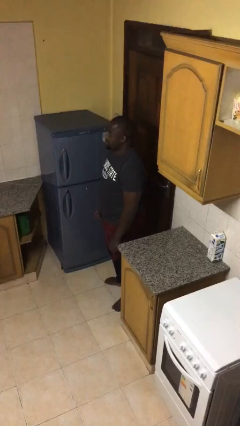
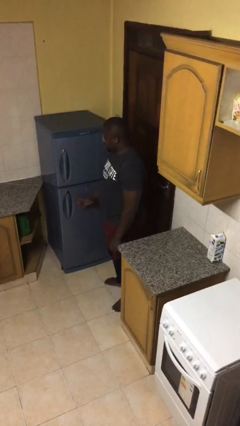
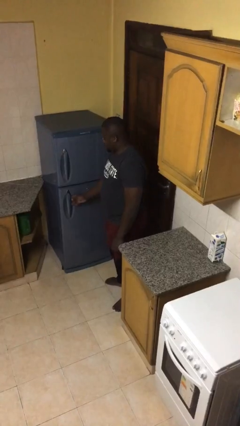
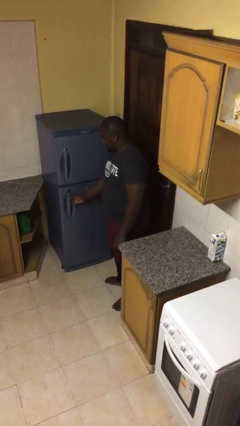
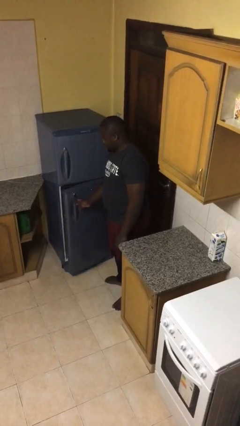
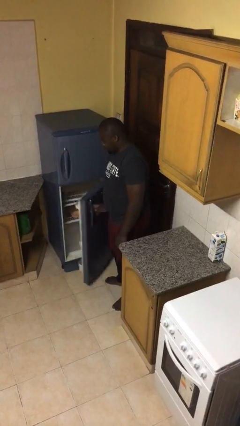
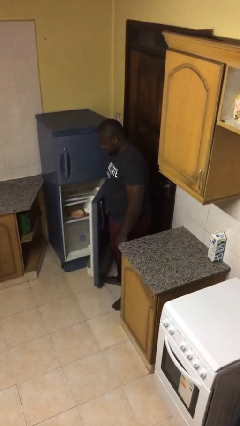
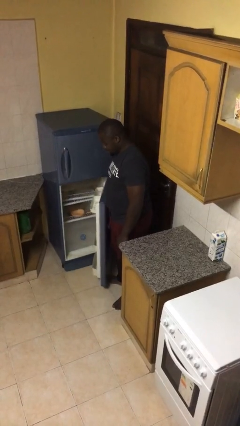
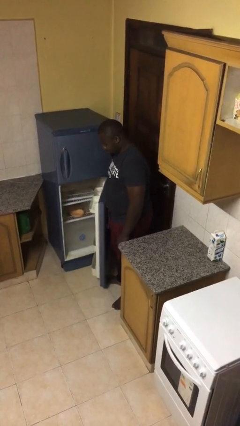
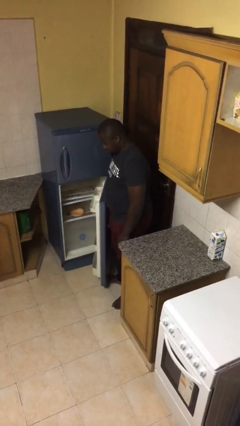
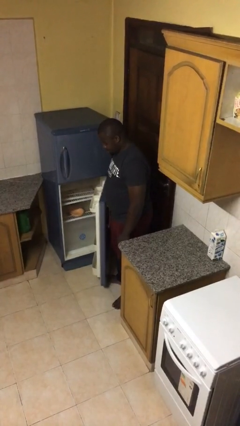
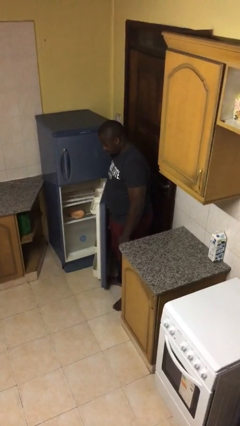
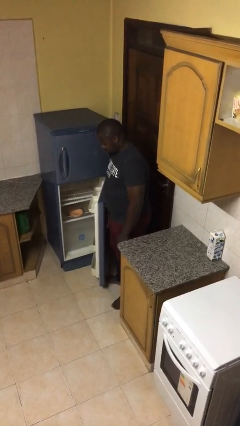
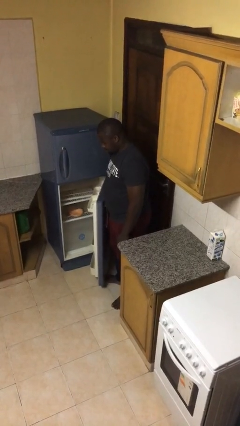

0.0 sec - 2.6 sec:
person opens refrigerator

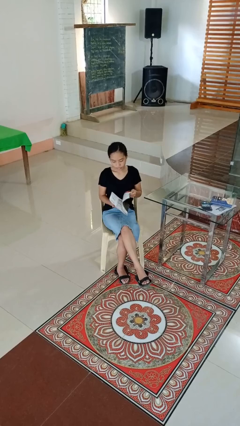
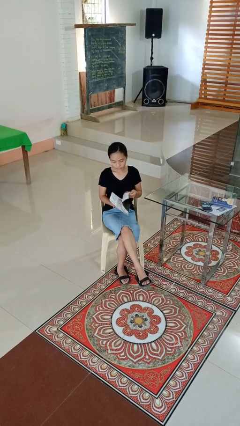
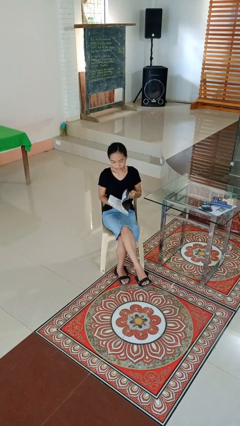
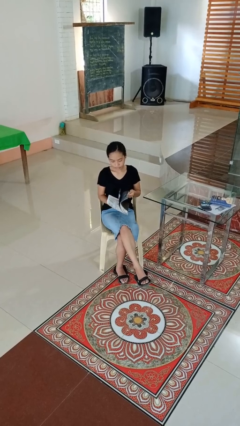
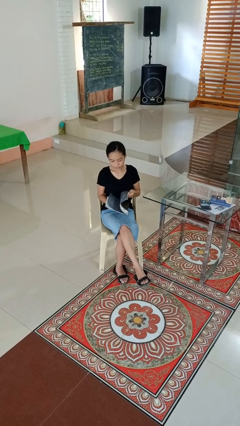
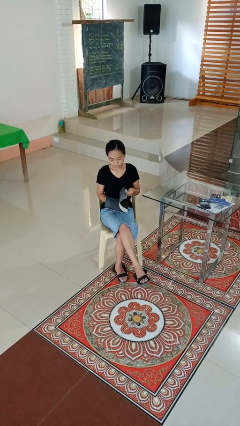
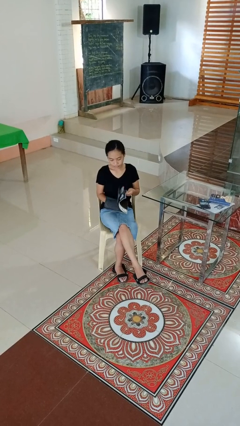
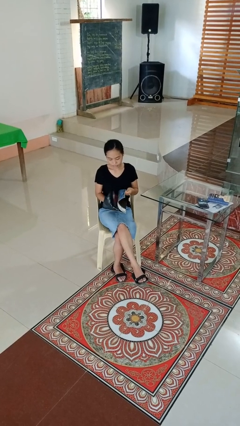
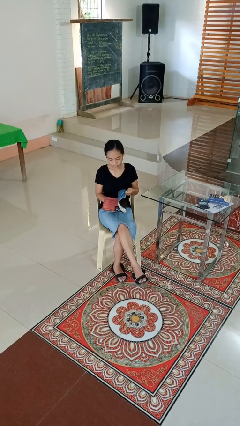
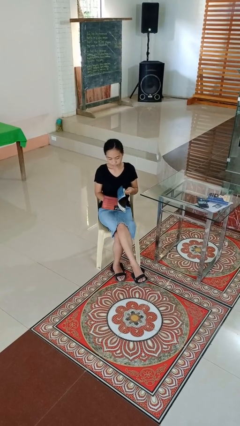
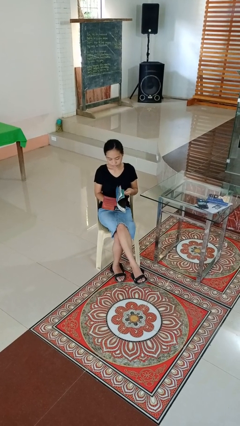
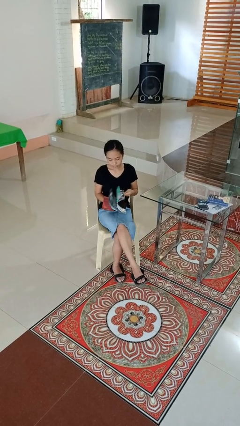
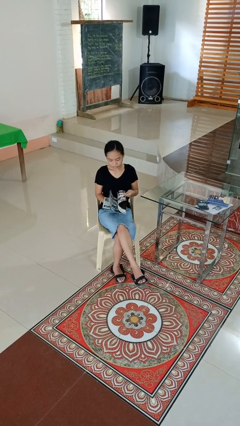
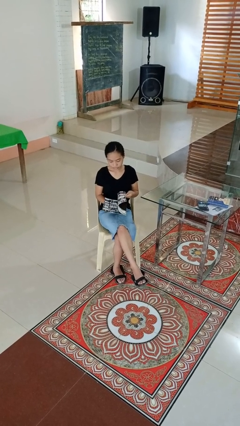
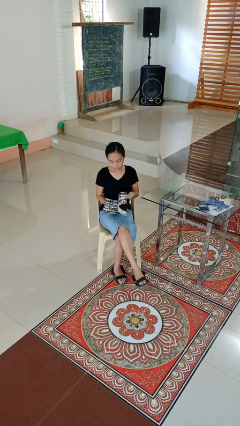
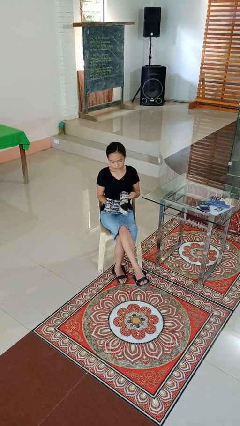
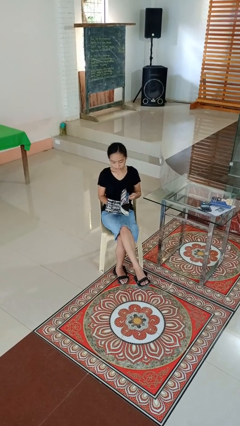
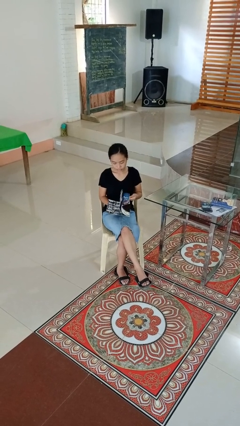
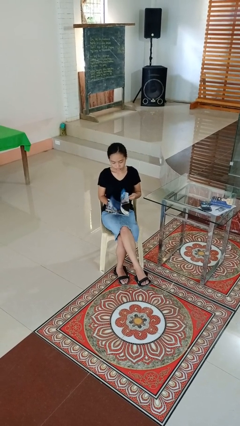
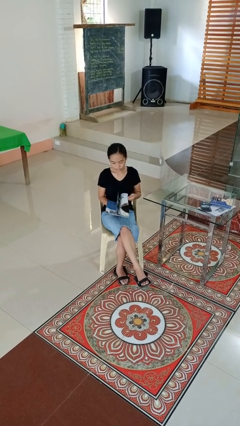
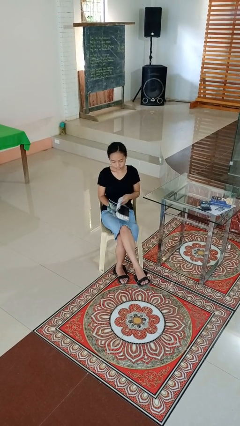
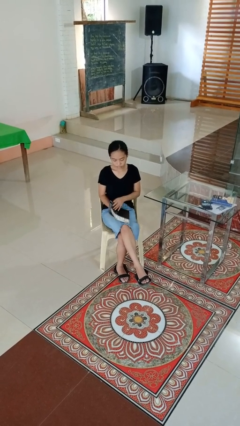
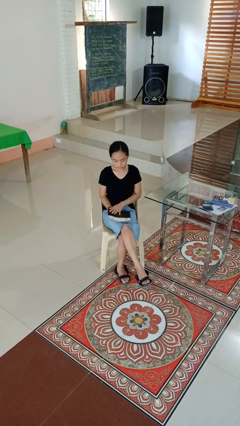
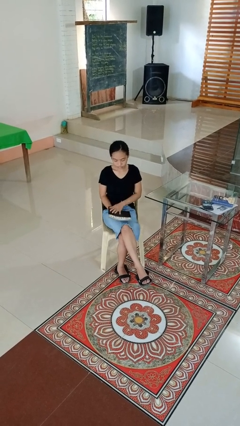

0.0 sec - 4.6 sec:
person reads magazine

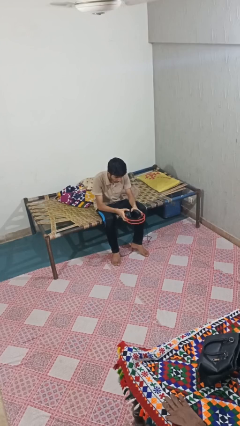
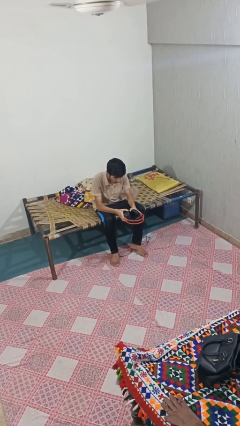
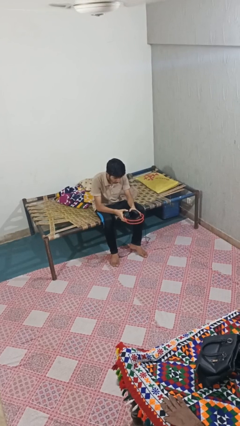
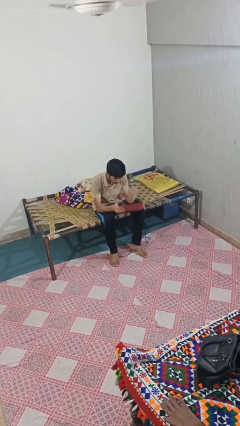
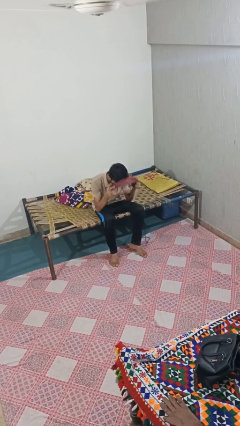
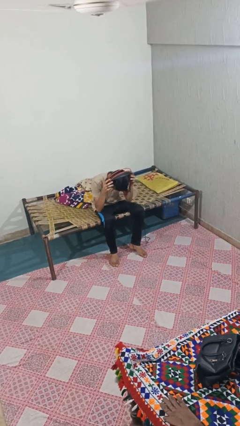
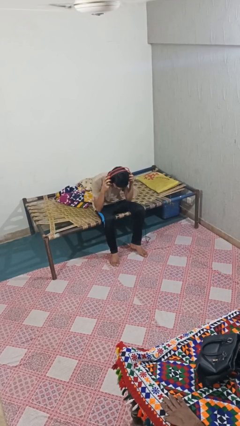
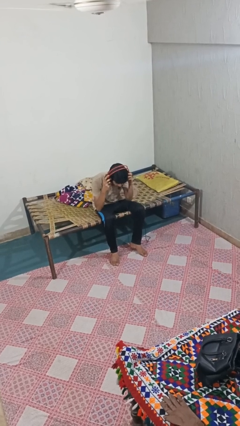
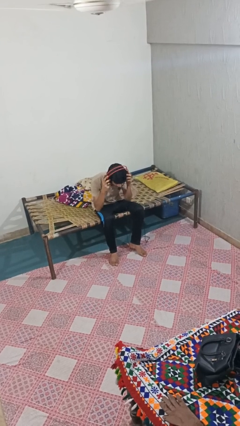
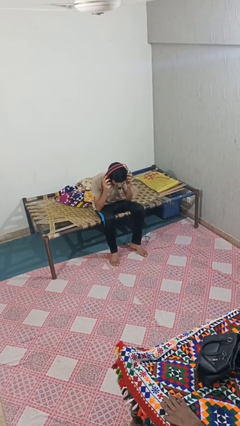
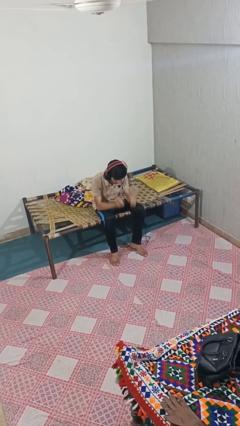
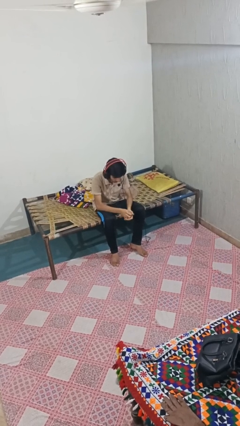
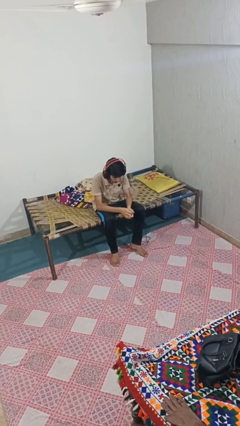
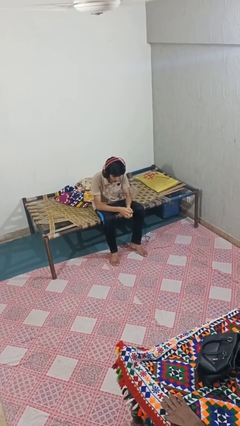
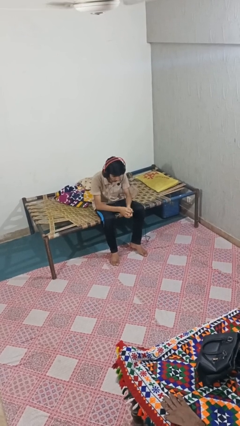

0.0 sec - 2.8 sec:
person puts on headphones

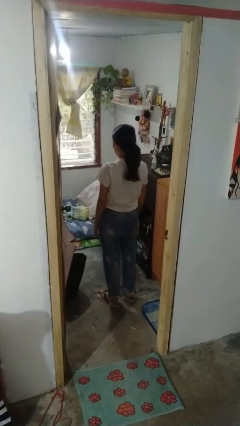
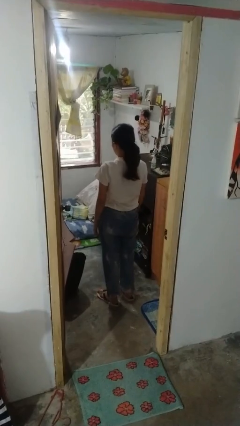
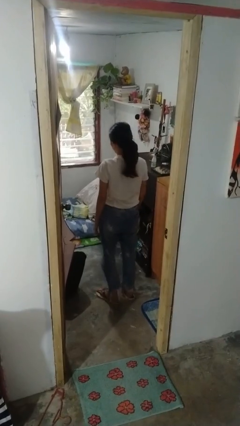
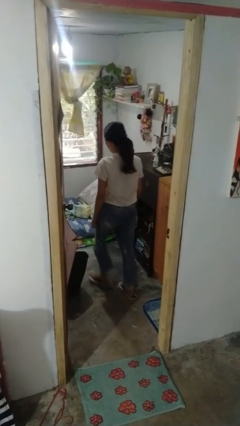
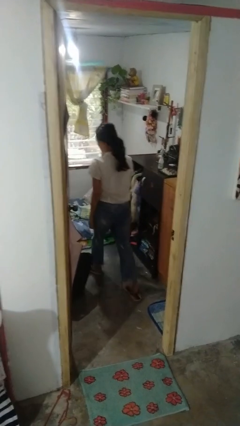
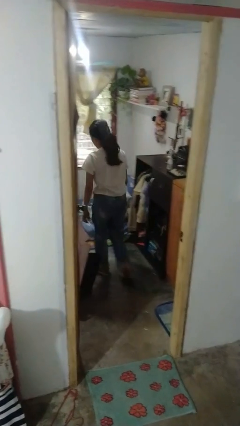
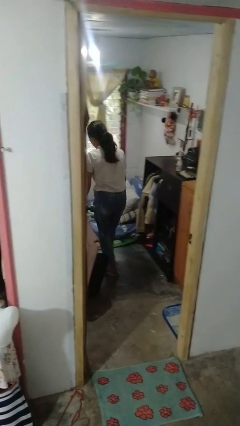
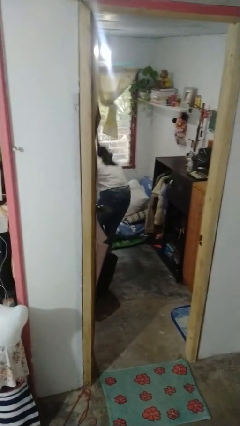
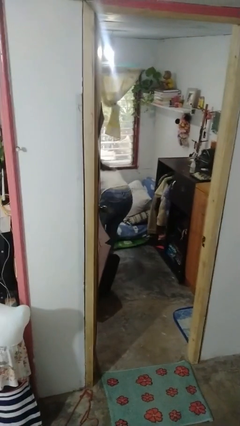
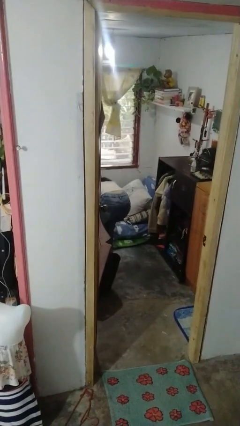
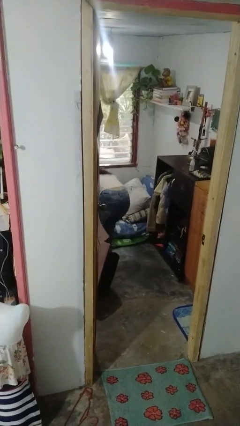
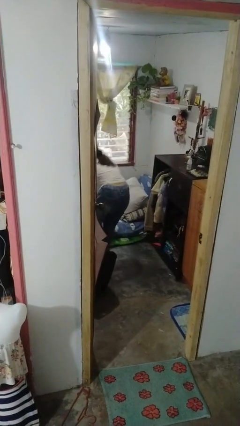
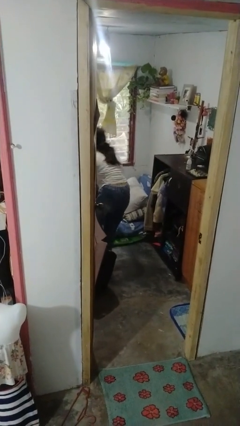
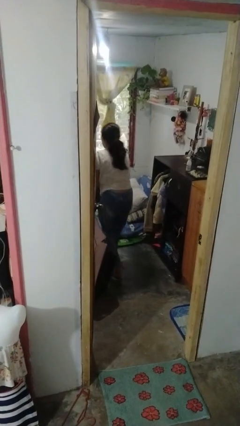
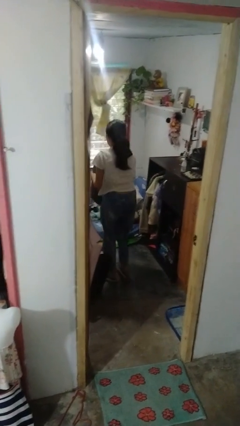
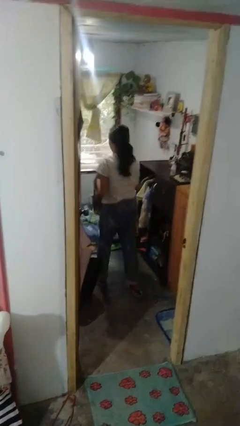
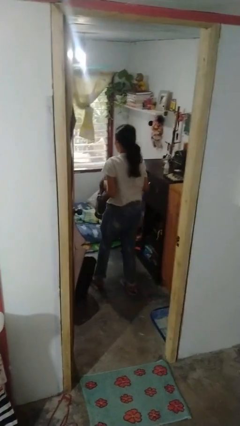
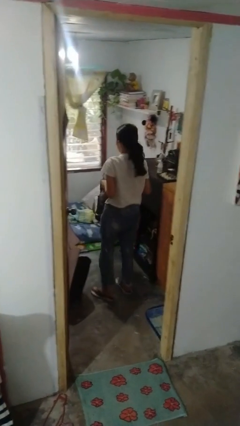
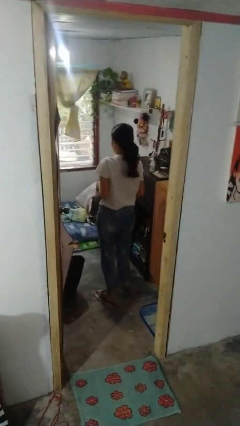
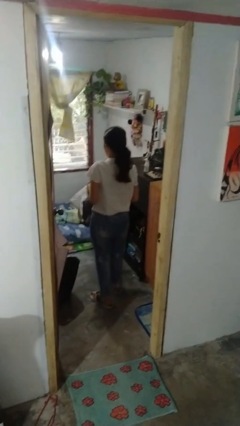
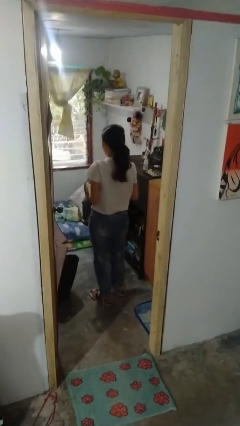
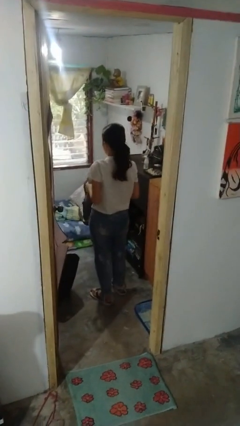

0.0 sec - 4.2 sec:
person picks up object from bed

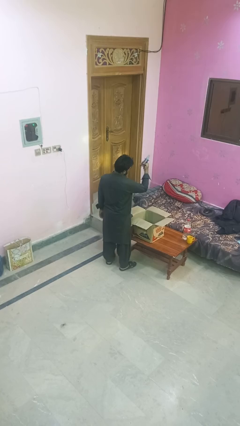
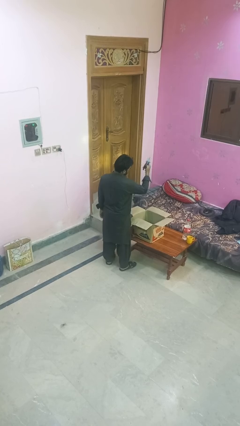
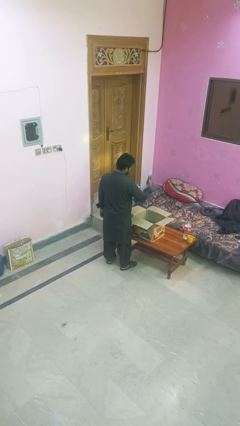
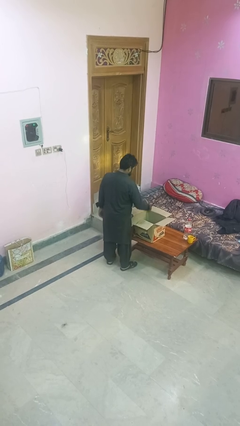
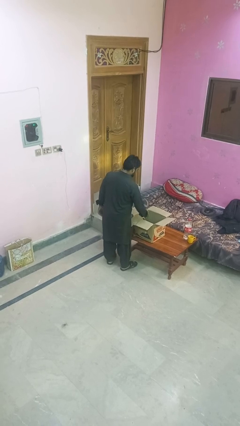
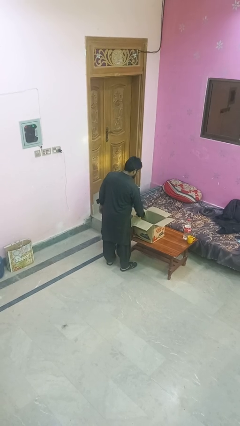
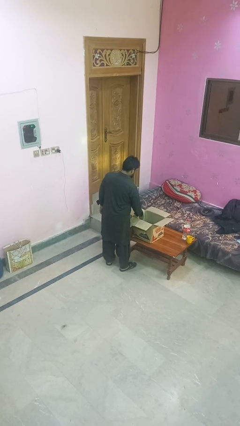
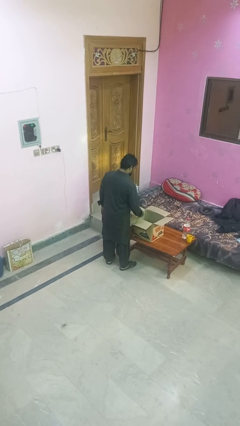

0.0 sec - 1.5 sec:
person puts object into box

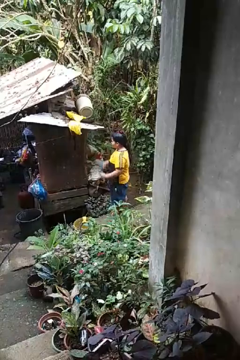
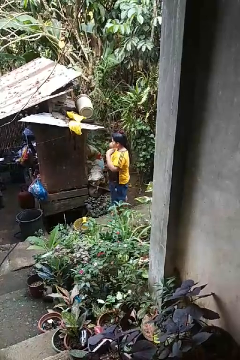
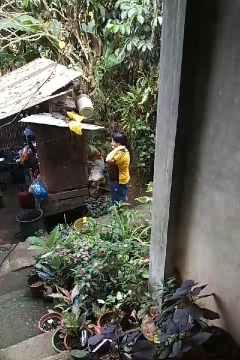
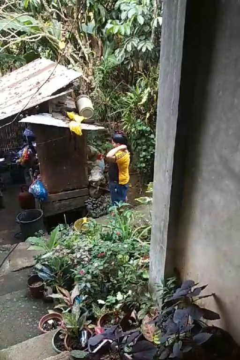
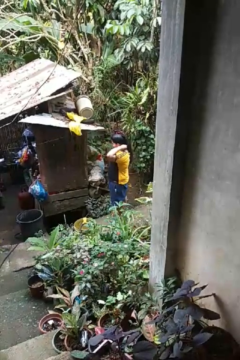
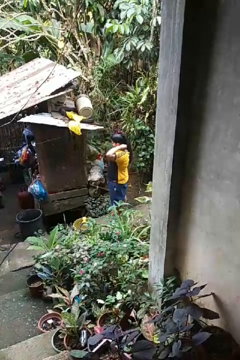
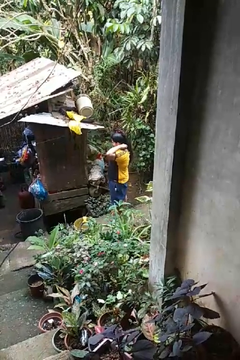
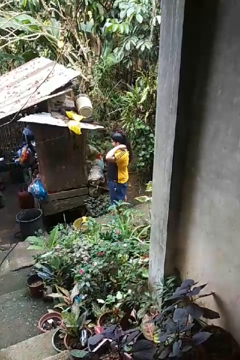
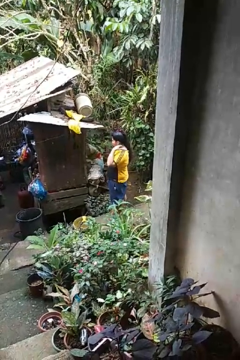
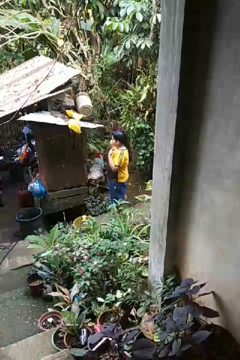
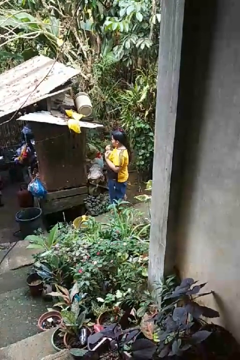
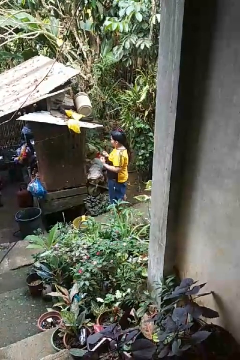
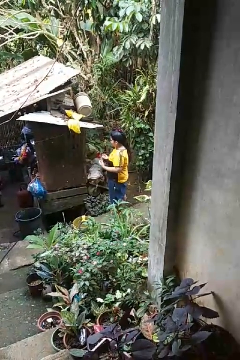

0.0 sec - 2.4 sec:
person takes off necklace
